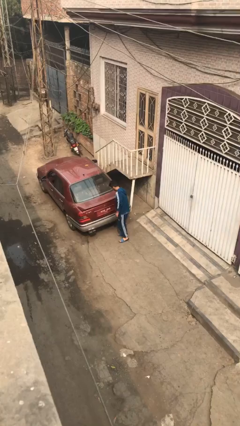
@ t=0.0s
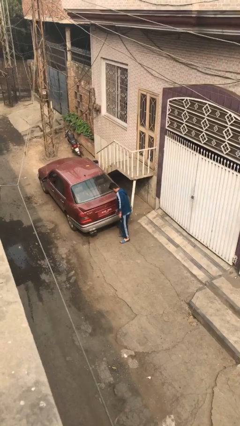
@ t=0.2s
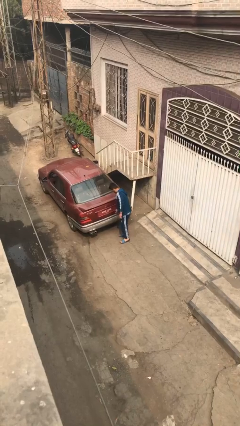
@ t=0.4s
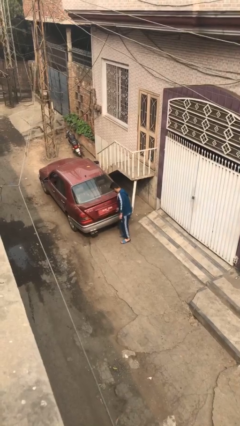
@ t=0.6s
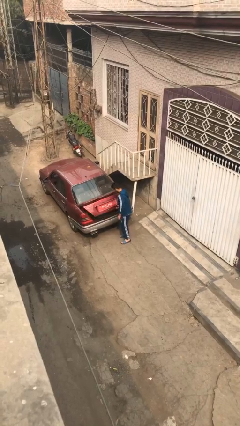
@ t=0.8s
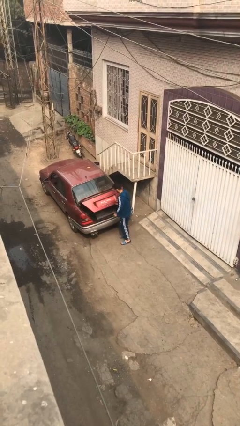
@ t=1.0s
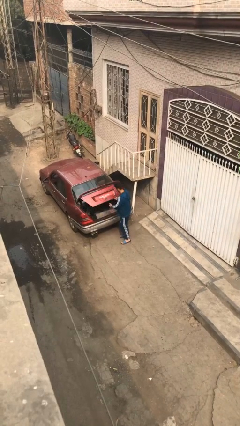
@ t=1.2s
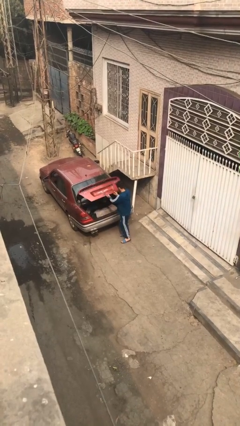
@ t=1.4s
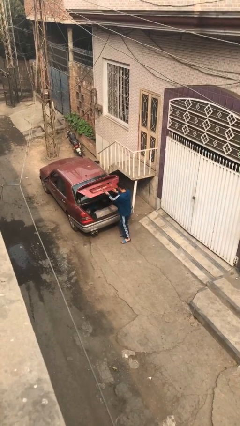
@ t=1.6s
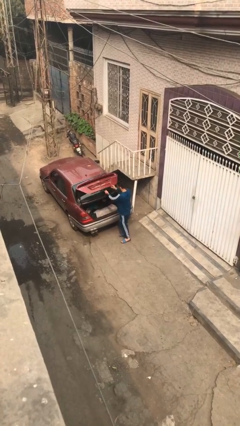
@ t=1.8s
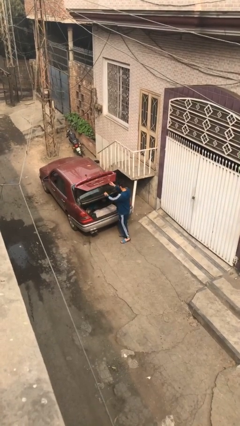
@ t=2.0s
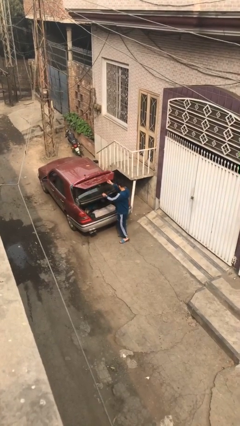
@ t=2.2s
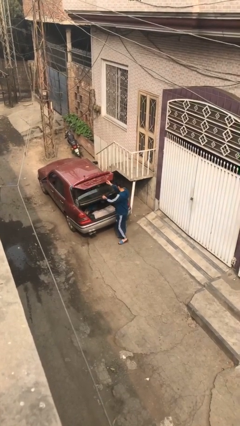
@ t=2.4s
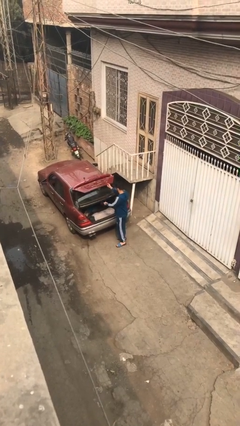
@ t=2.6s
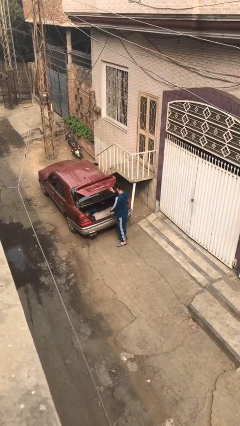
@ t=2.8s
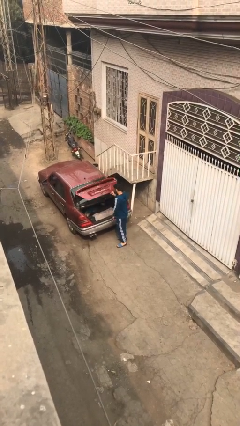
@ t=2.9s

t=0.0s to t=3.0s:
person opens car trunk

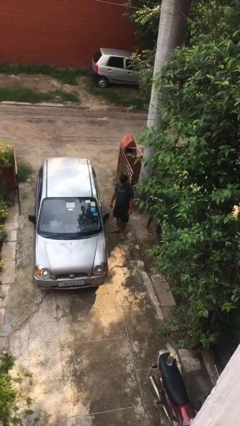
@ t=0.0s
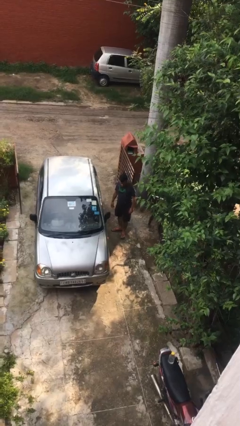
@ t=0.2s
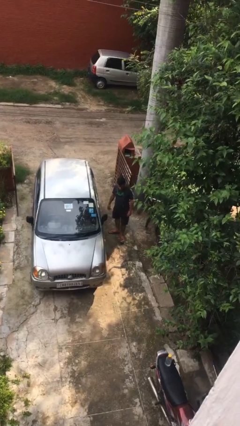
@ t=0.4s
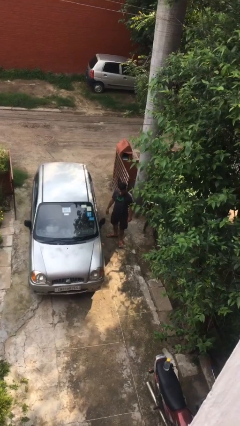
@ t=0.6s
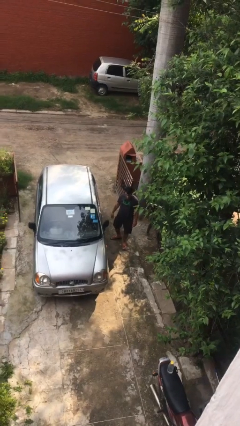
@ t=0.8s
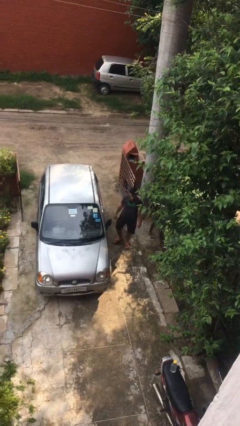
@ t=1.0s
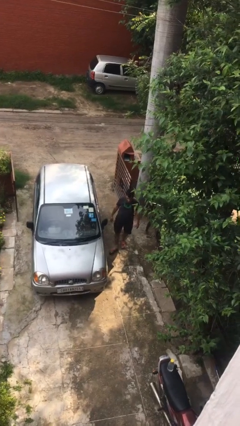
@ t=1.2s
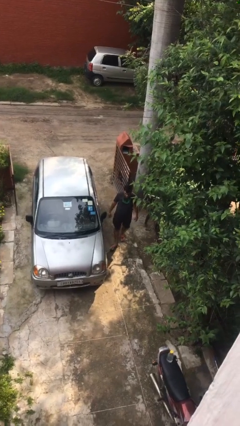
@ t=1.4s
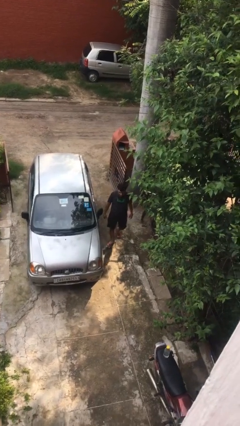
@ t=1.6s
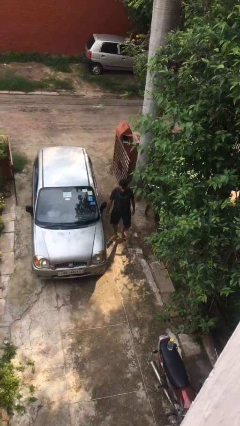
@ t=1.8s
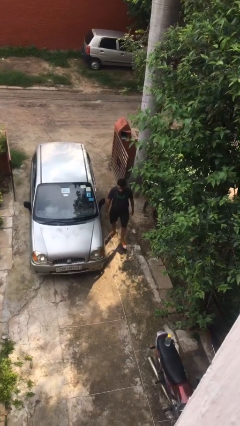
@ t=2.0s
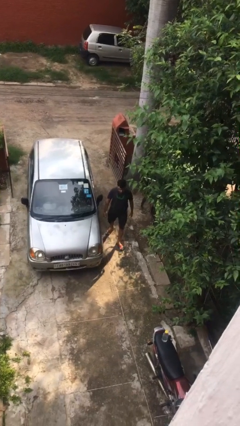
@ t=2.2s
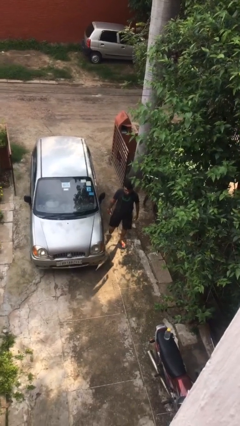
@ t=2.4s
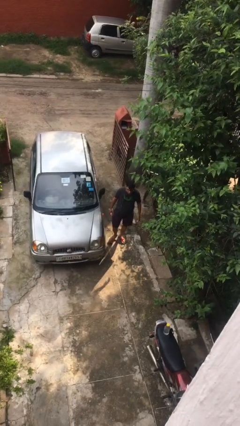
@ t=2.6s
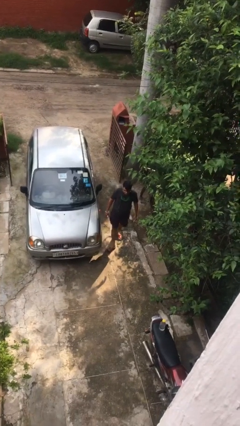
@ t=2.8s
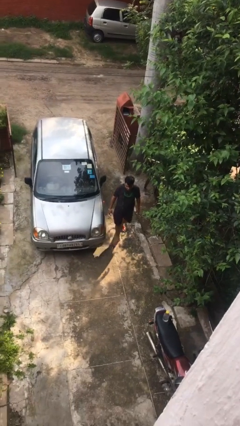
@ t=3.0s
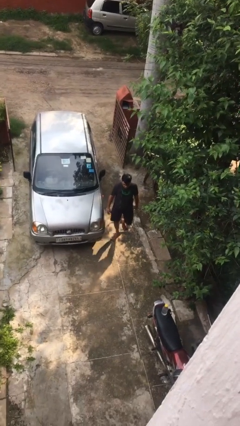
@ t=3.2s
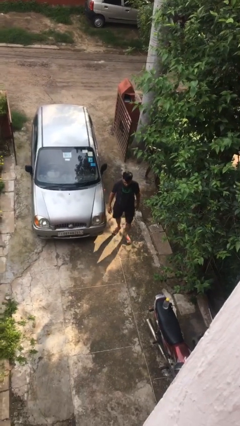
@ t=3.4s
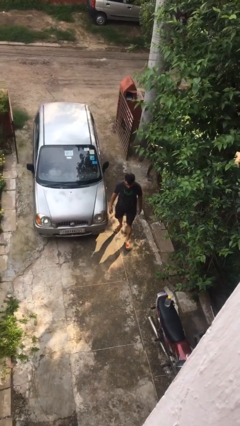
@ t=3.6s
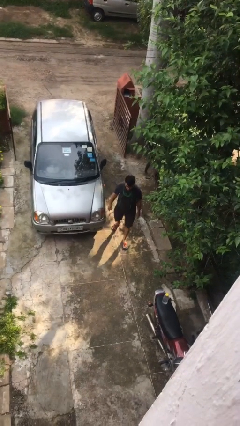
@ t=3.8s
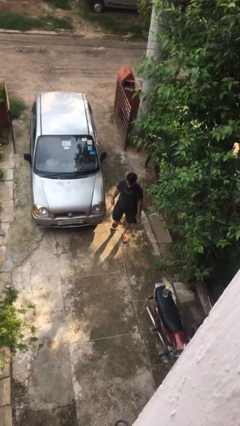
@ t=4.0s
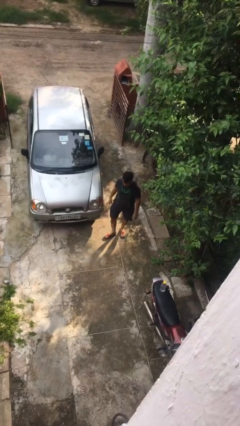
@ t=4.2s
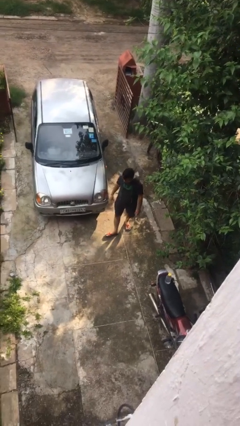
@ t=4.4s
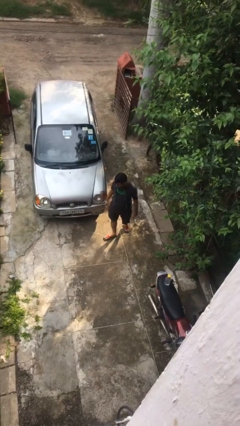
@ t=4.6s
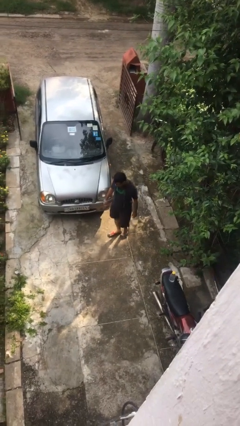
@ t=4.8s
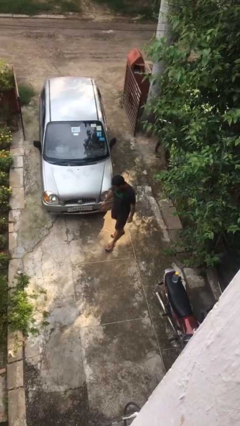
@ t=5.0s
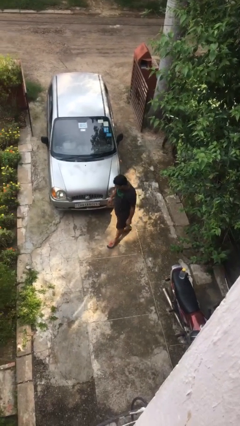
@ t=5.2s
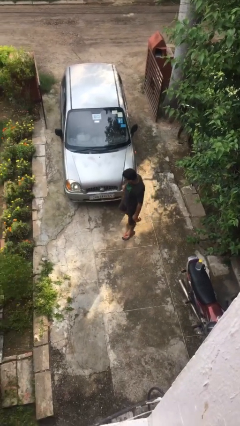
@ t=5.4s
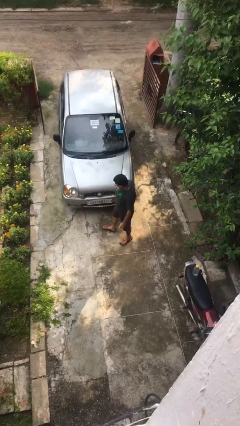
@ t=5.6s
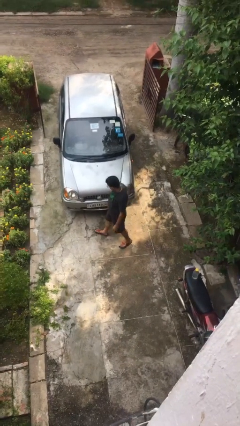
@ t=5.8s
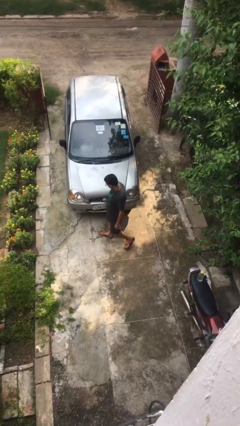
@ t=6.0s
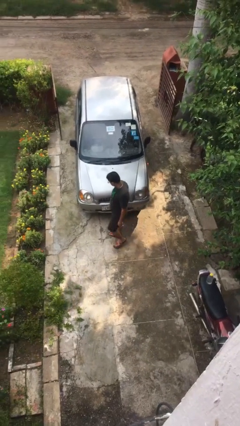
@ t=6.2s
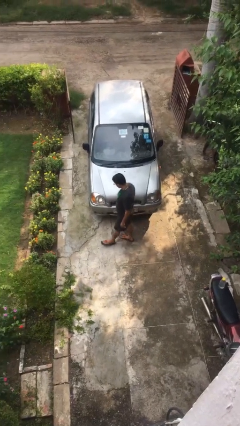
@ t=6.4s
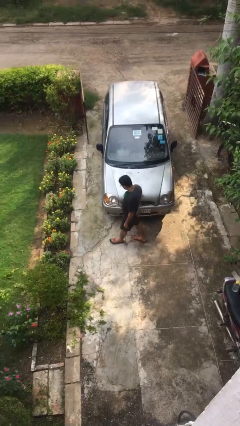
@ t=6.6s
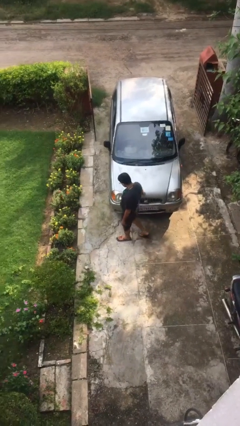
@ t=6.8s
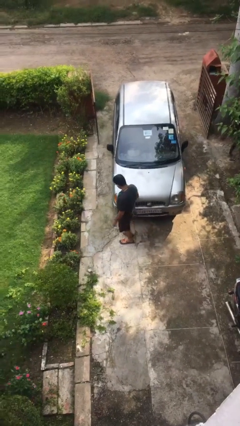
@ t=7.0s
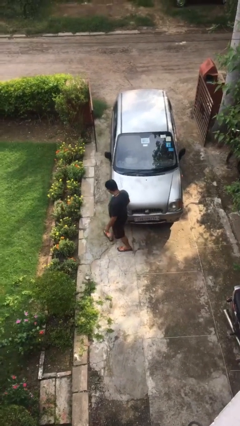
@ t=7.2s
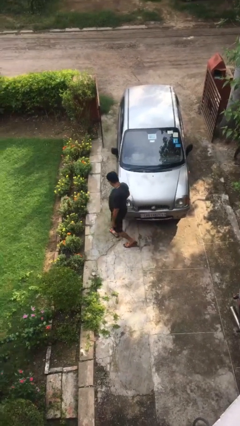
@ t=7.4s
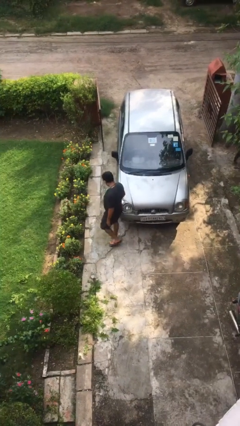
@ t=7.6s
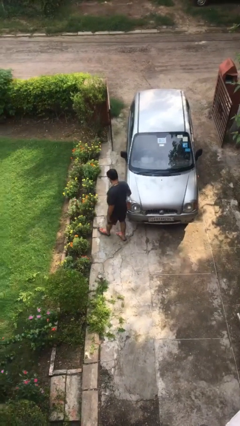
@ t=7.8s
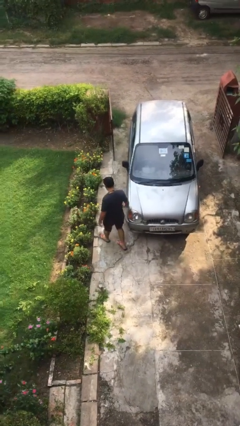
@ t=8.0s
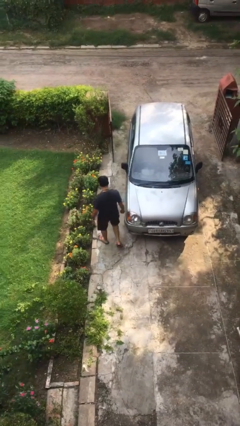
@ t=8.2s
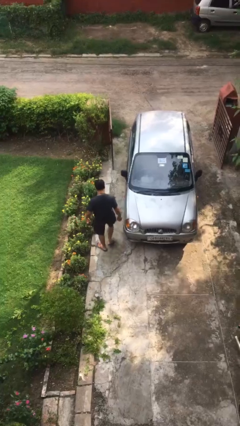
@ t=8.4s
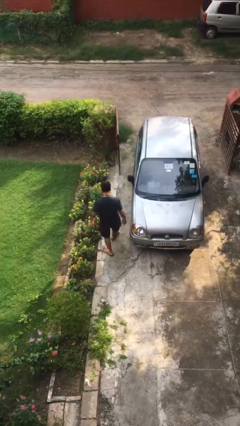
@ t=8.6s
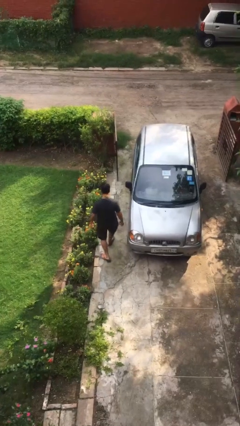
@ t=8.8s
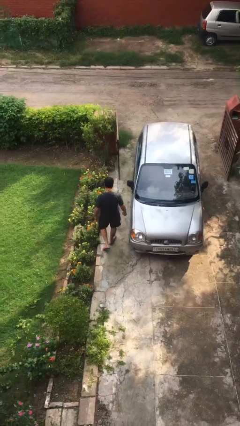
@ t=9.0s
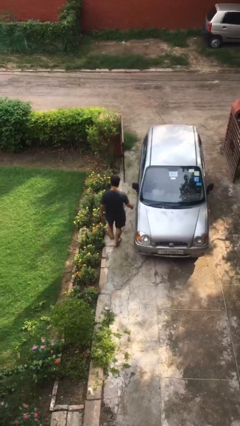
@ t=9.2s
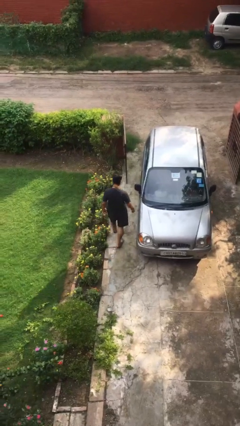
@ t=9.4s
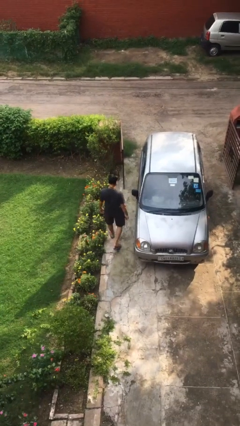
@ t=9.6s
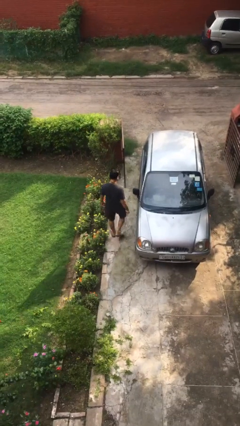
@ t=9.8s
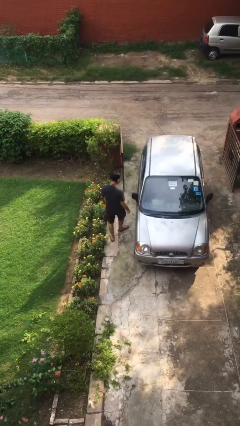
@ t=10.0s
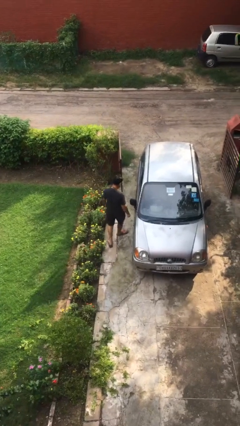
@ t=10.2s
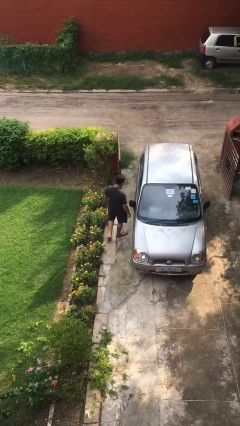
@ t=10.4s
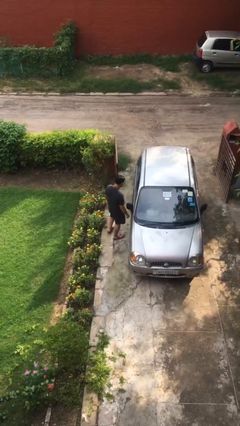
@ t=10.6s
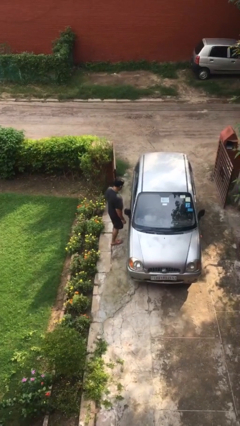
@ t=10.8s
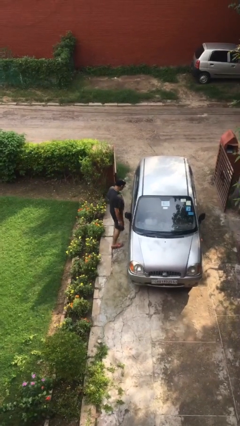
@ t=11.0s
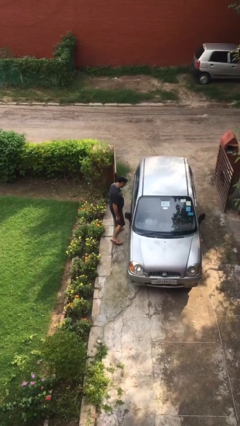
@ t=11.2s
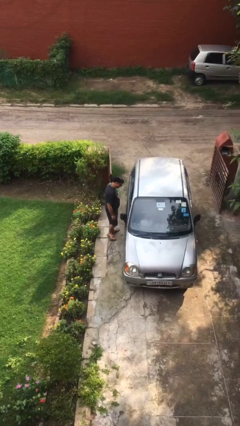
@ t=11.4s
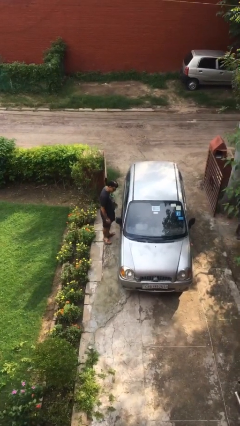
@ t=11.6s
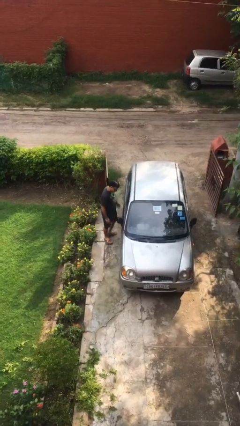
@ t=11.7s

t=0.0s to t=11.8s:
person walks around car

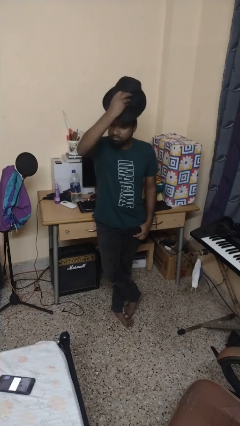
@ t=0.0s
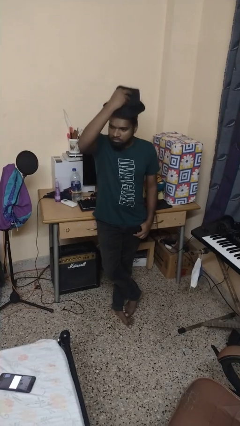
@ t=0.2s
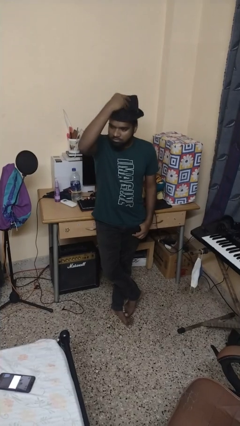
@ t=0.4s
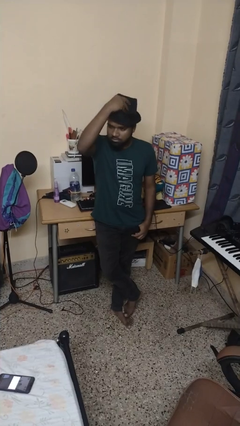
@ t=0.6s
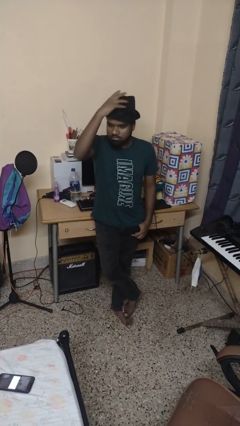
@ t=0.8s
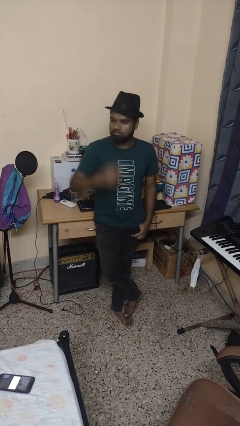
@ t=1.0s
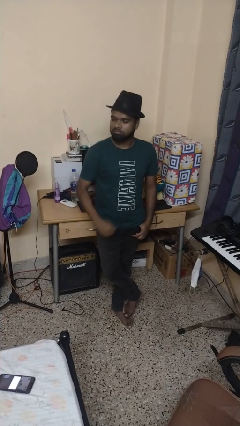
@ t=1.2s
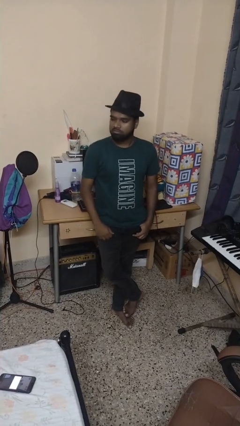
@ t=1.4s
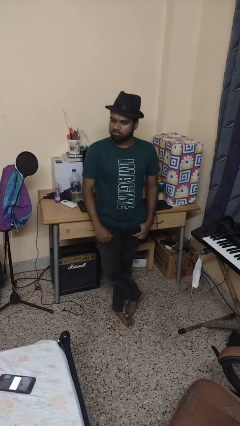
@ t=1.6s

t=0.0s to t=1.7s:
person puts on hat

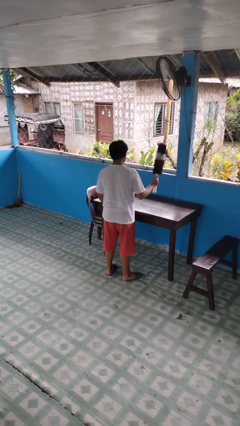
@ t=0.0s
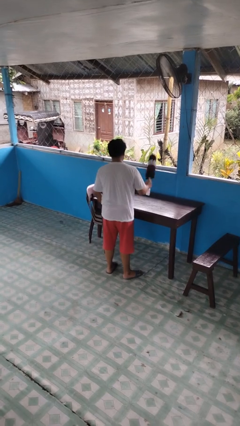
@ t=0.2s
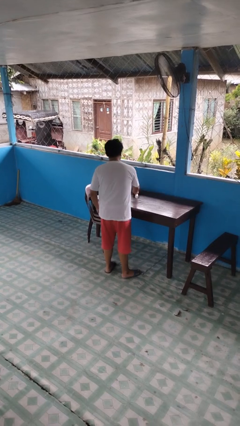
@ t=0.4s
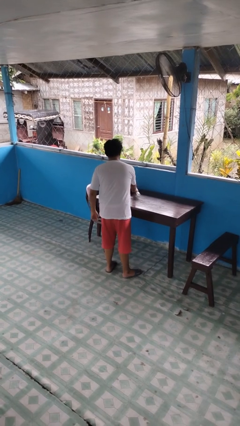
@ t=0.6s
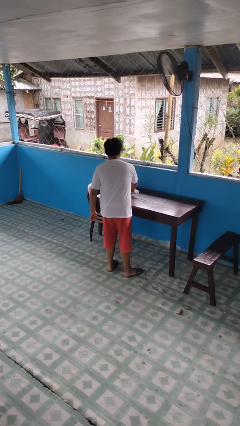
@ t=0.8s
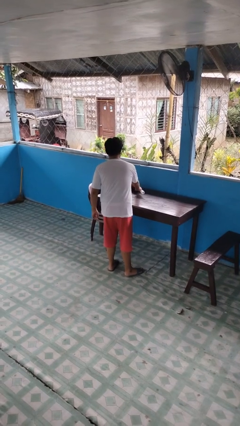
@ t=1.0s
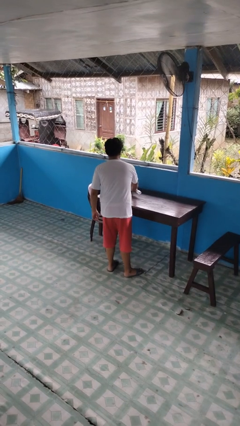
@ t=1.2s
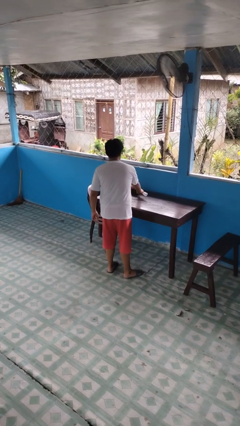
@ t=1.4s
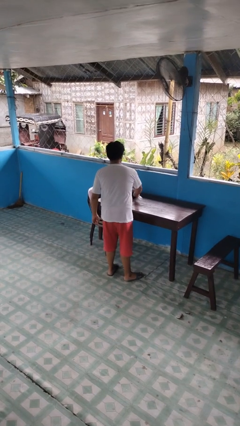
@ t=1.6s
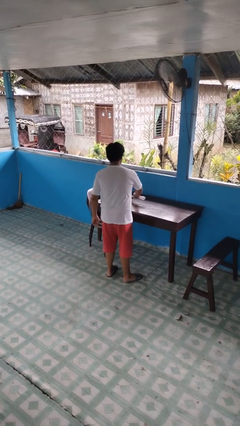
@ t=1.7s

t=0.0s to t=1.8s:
person dusts furniture
